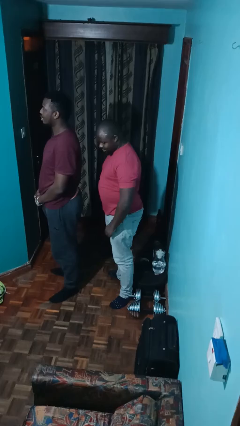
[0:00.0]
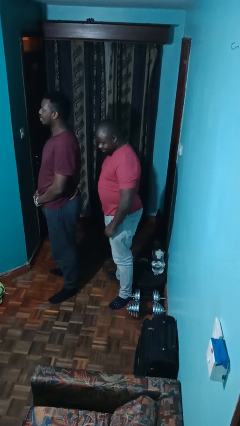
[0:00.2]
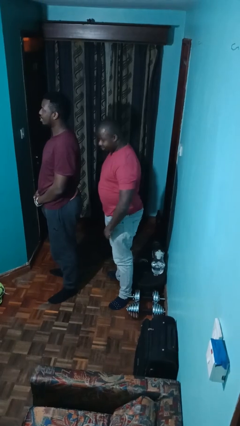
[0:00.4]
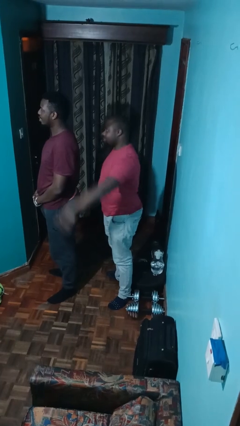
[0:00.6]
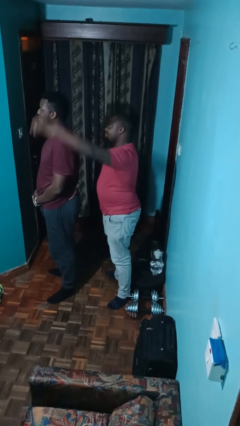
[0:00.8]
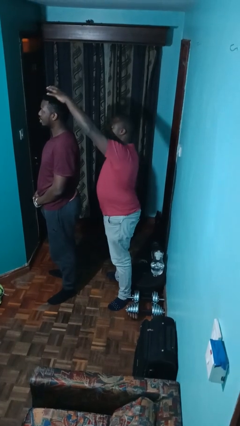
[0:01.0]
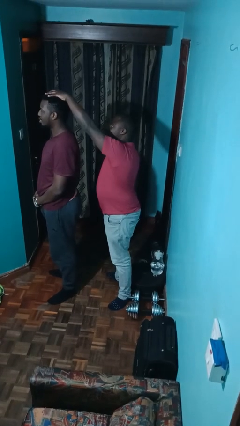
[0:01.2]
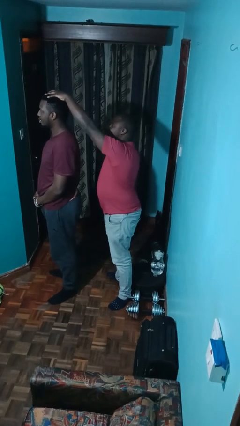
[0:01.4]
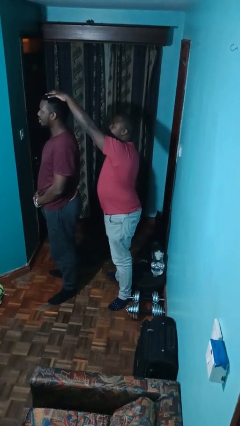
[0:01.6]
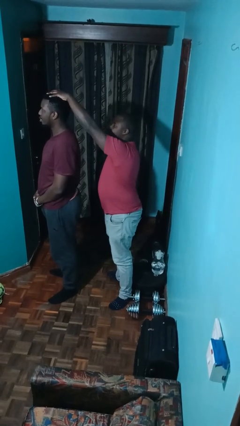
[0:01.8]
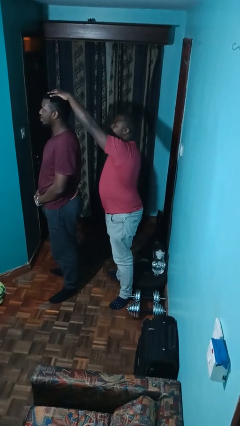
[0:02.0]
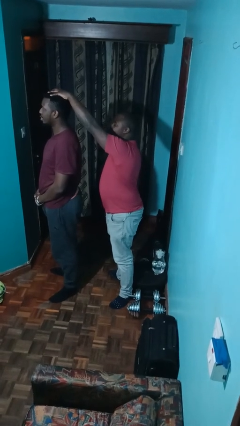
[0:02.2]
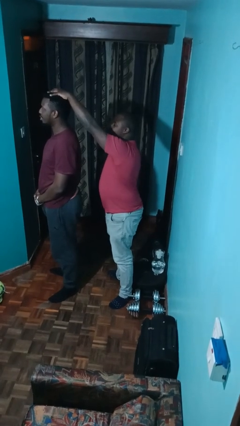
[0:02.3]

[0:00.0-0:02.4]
person grabs person by hair

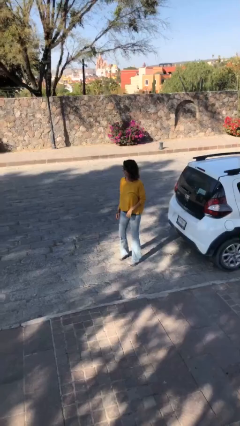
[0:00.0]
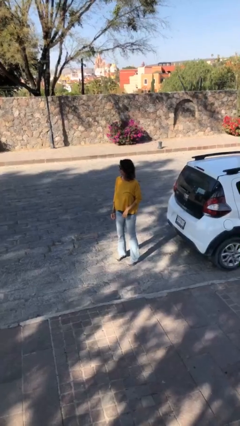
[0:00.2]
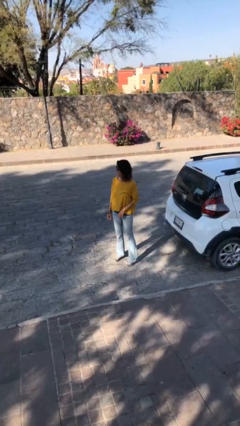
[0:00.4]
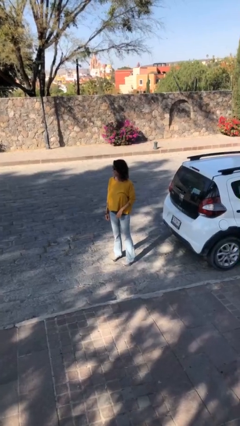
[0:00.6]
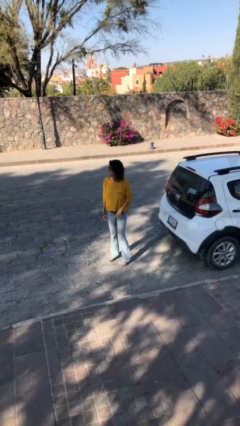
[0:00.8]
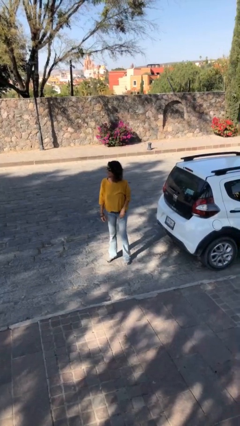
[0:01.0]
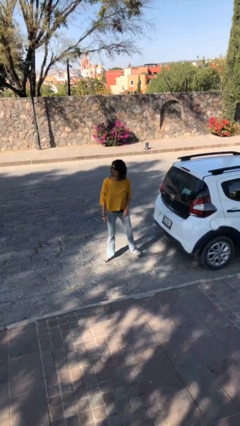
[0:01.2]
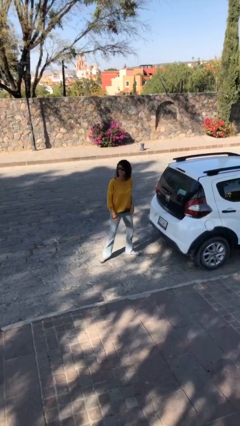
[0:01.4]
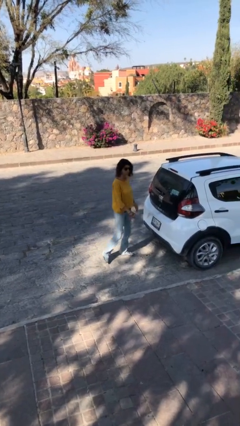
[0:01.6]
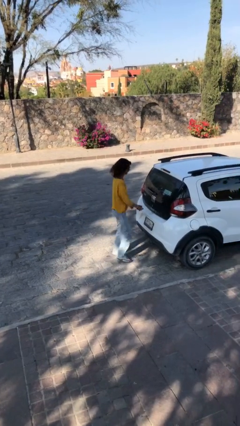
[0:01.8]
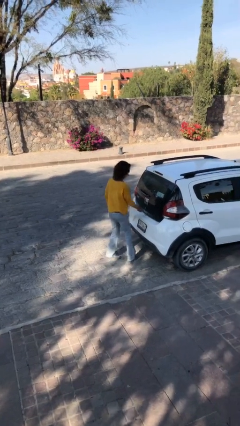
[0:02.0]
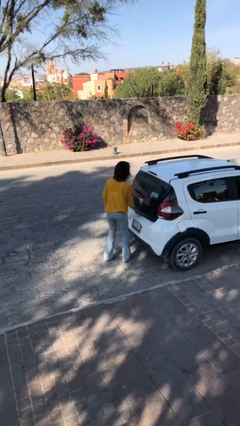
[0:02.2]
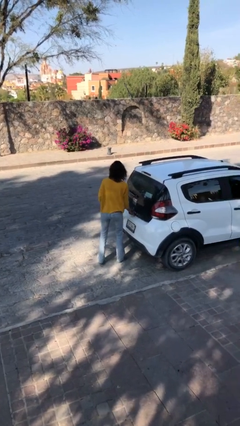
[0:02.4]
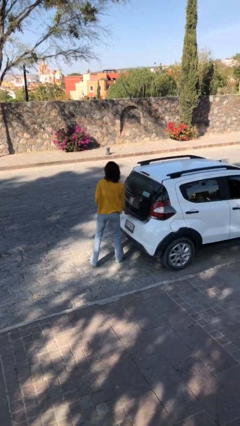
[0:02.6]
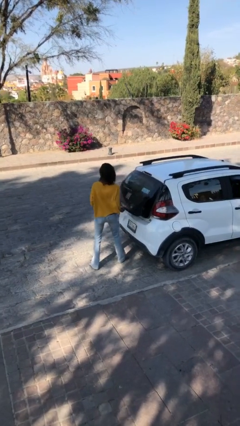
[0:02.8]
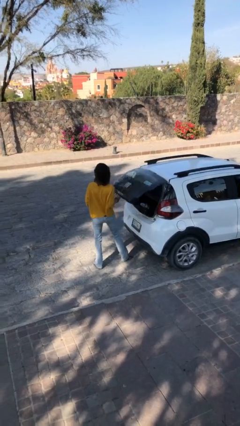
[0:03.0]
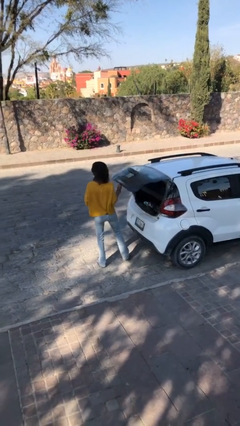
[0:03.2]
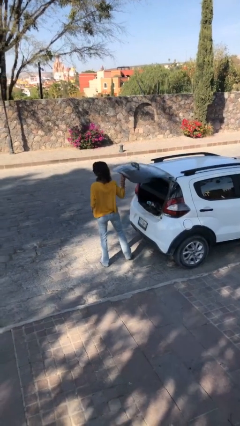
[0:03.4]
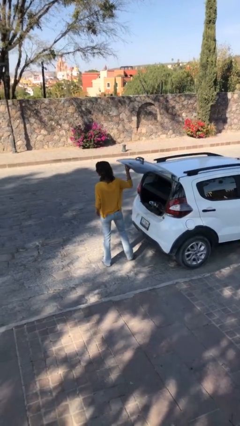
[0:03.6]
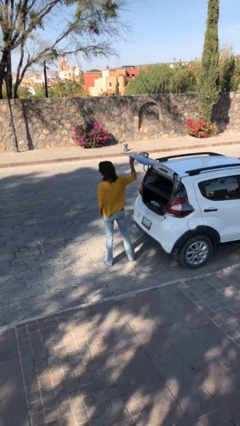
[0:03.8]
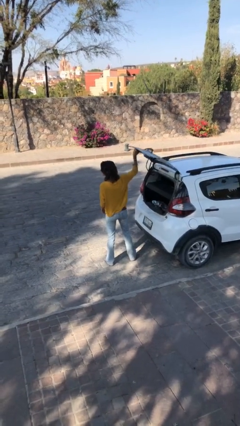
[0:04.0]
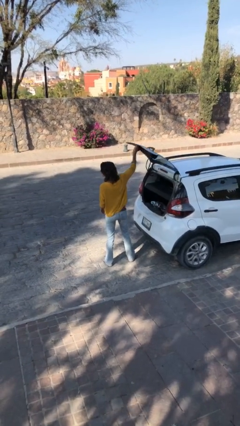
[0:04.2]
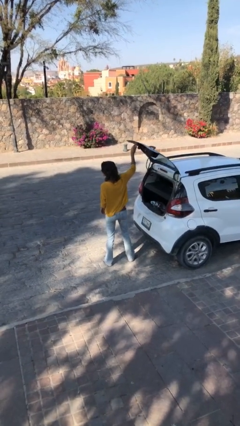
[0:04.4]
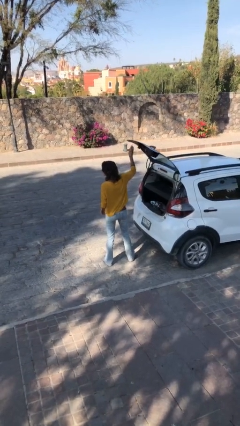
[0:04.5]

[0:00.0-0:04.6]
person opens car trunk

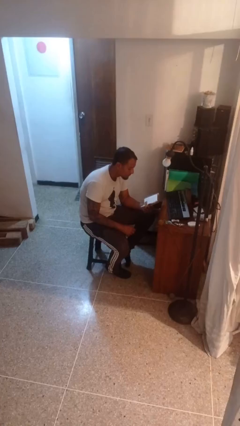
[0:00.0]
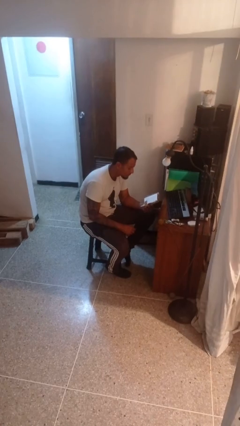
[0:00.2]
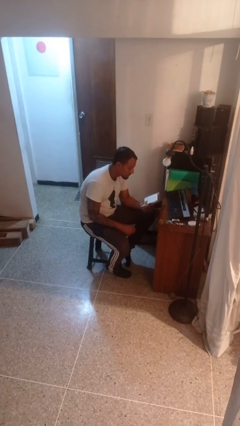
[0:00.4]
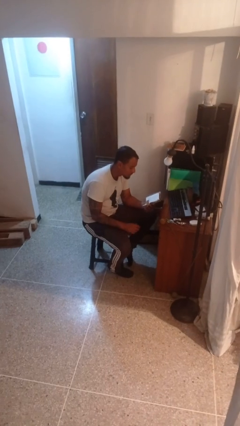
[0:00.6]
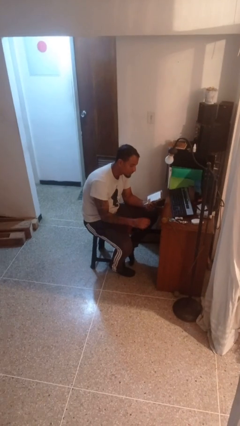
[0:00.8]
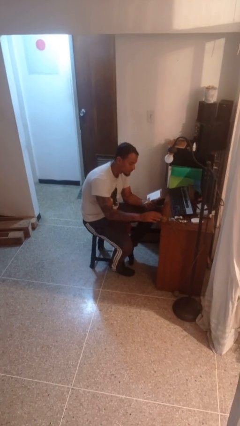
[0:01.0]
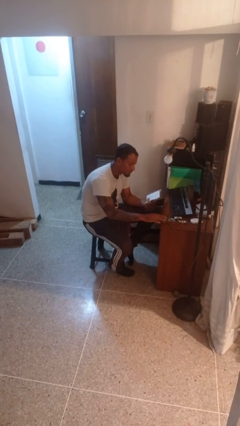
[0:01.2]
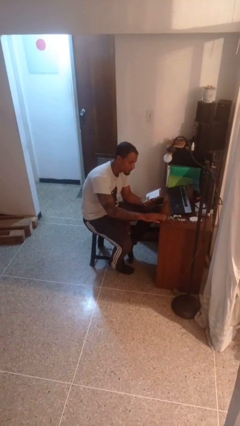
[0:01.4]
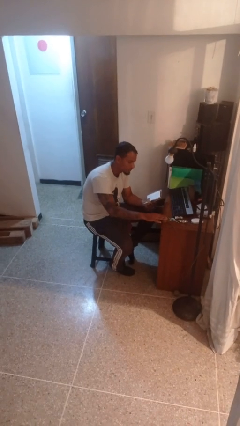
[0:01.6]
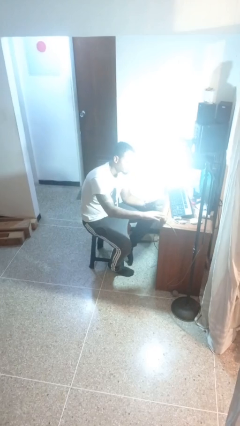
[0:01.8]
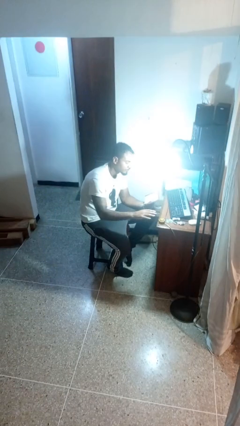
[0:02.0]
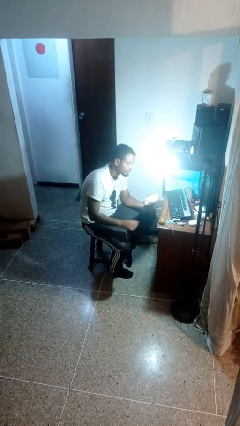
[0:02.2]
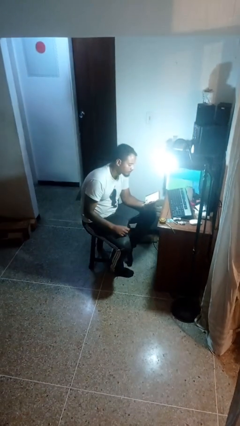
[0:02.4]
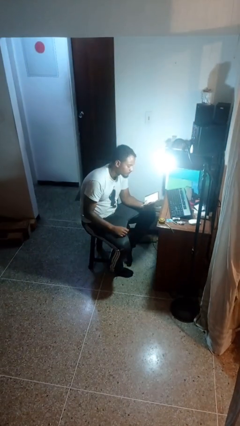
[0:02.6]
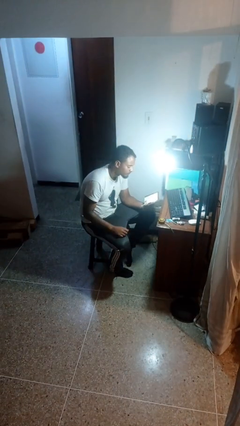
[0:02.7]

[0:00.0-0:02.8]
person turns on lamp

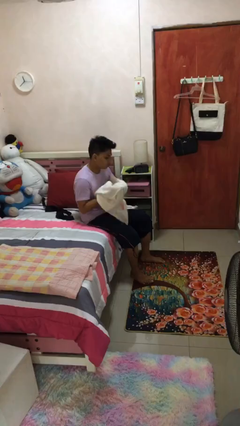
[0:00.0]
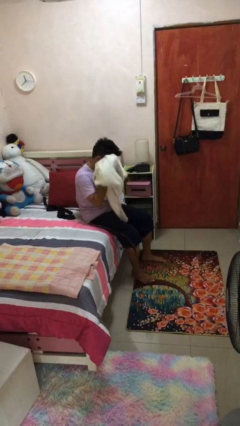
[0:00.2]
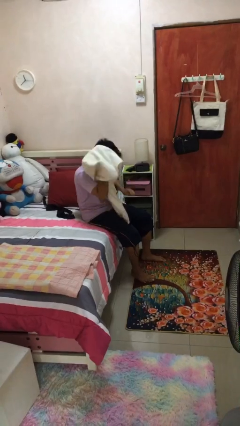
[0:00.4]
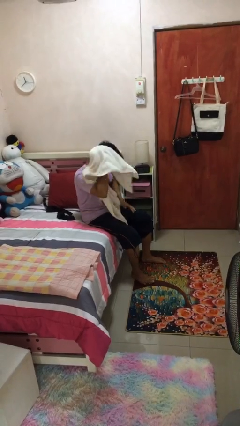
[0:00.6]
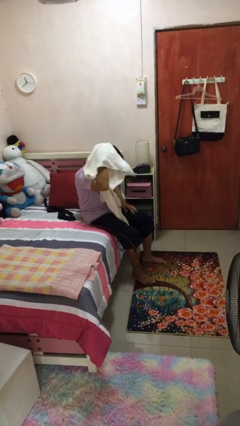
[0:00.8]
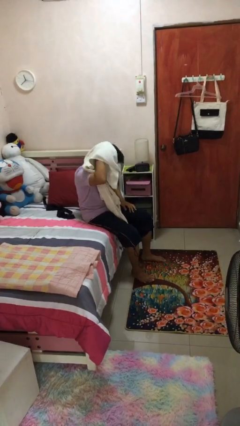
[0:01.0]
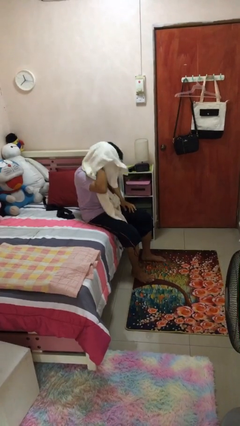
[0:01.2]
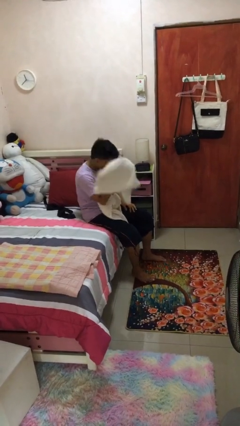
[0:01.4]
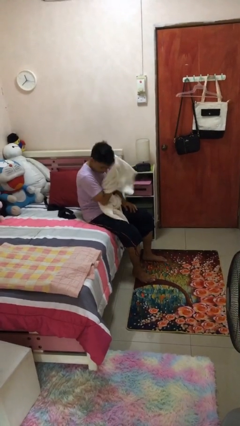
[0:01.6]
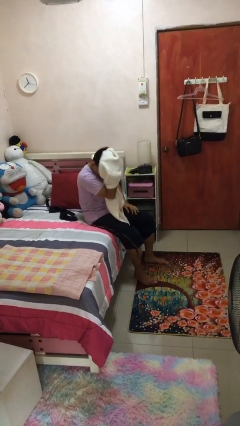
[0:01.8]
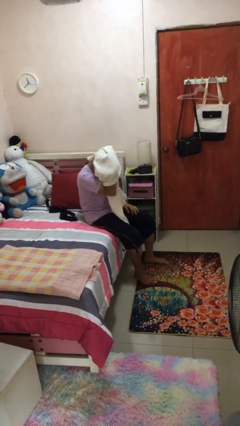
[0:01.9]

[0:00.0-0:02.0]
person dries hair with towel

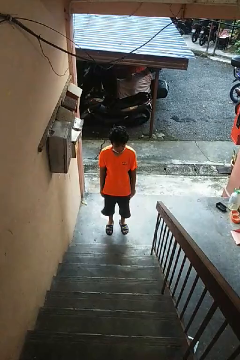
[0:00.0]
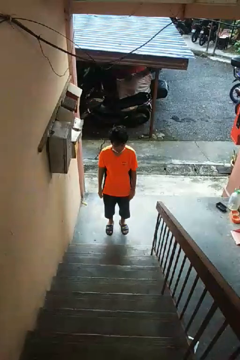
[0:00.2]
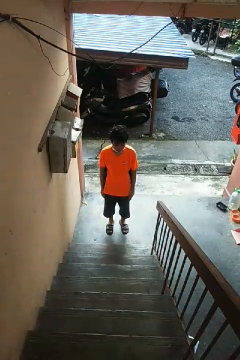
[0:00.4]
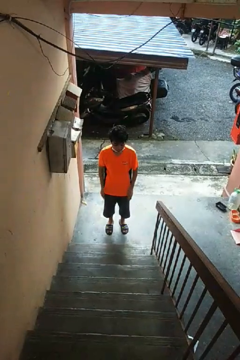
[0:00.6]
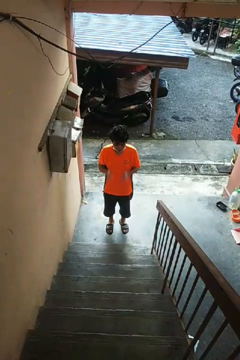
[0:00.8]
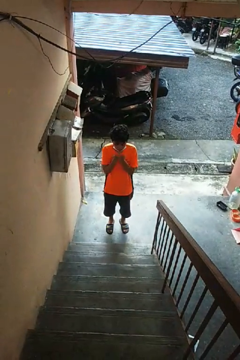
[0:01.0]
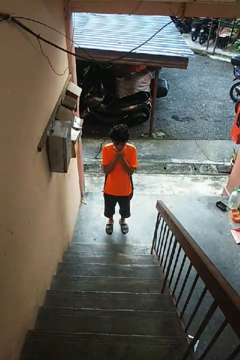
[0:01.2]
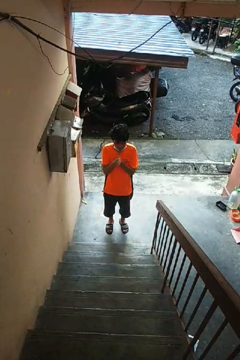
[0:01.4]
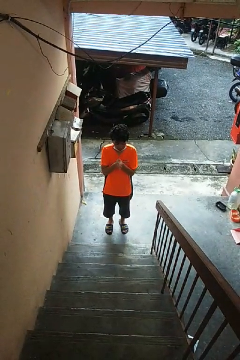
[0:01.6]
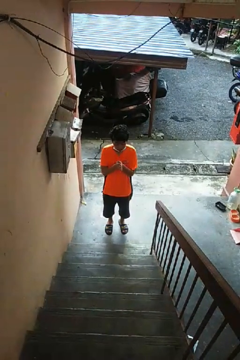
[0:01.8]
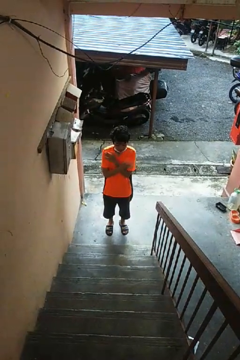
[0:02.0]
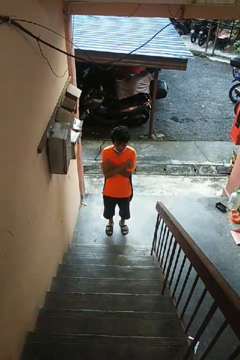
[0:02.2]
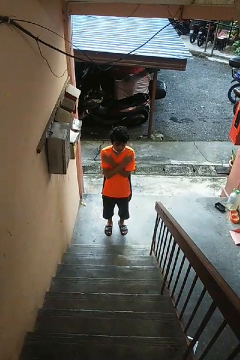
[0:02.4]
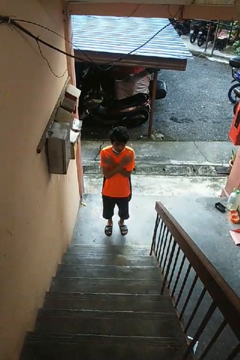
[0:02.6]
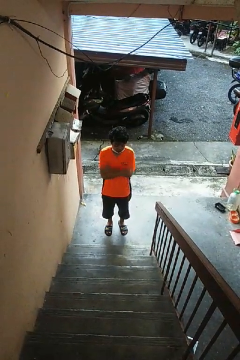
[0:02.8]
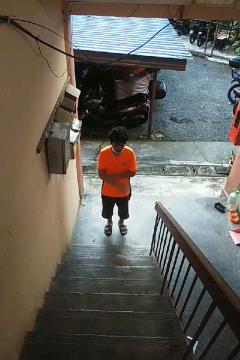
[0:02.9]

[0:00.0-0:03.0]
person blows into hands

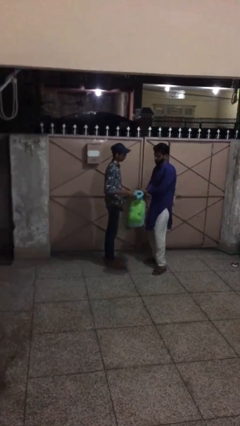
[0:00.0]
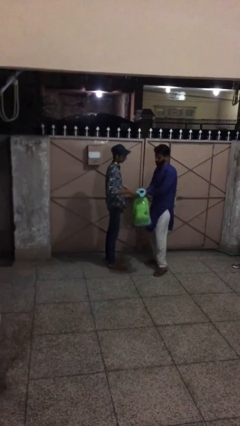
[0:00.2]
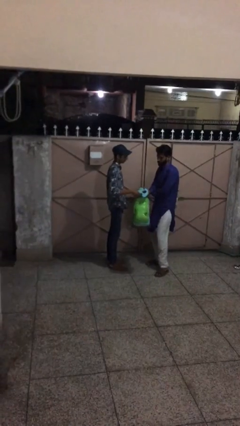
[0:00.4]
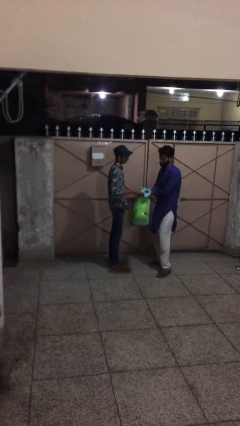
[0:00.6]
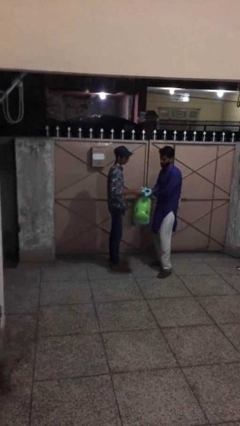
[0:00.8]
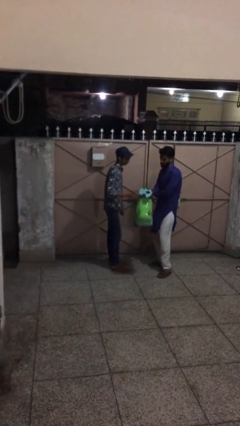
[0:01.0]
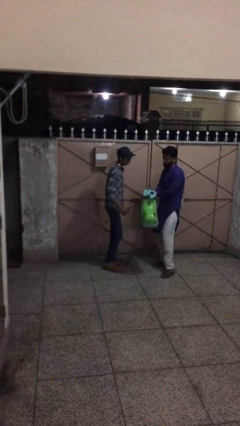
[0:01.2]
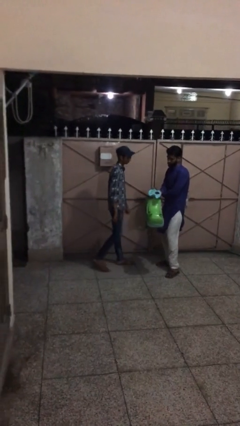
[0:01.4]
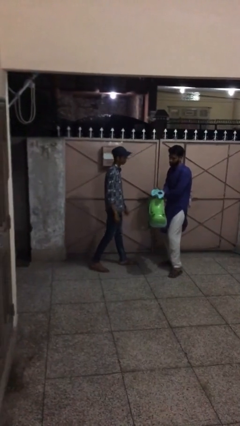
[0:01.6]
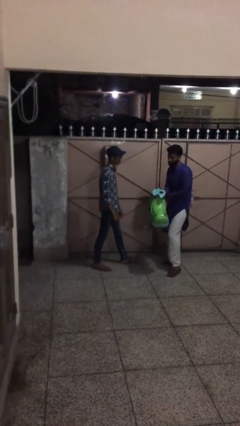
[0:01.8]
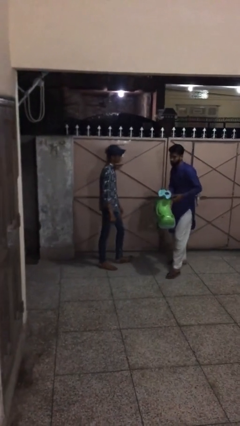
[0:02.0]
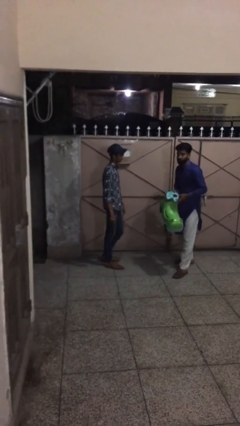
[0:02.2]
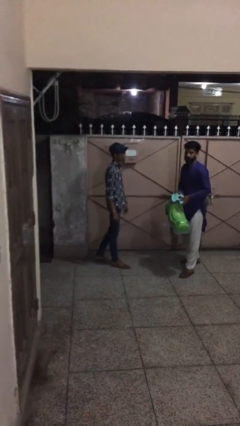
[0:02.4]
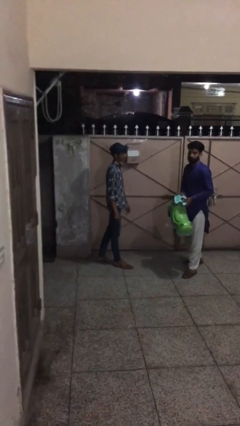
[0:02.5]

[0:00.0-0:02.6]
person transfers object to person

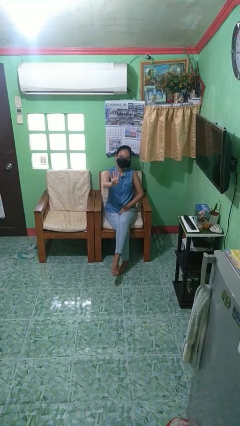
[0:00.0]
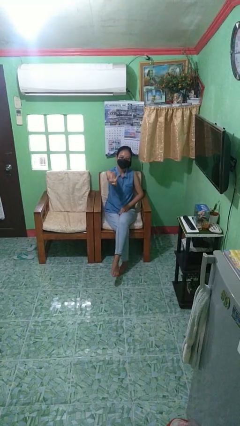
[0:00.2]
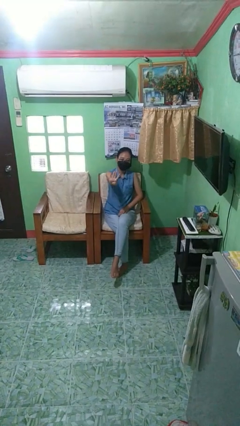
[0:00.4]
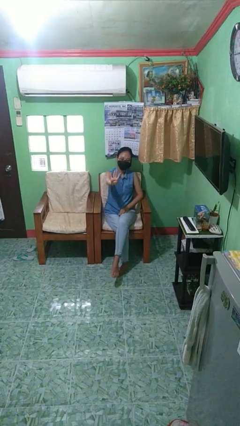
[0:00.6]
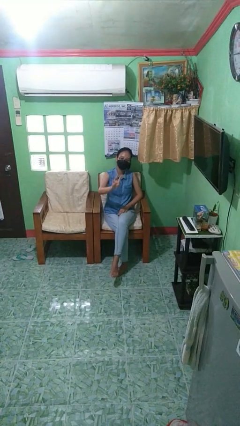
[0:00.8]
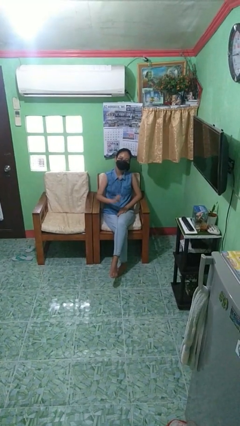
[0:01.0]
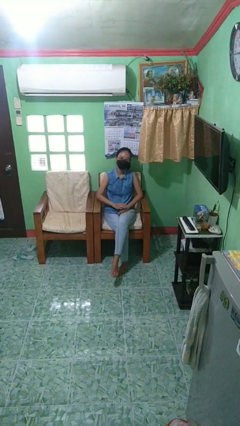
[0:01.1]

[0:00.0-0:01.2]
person gestures number four
